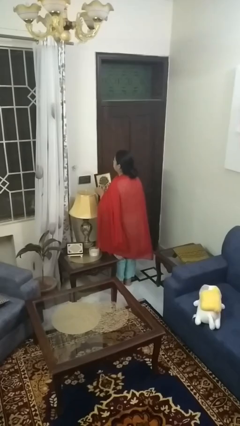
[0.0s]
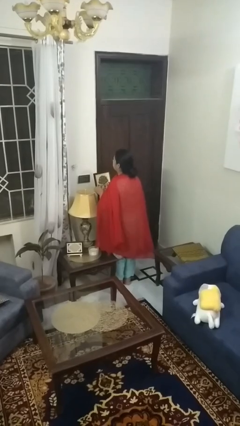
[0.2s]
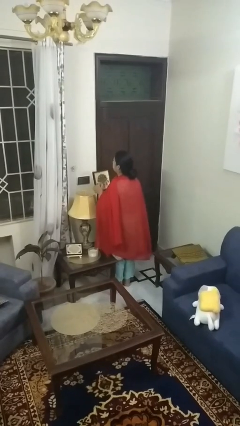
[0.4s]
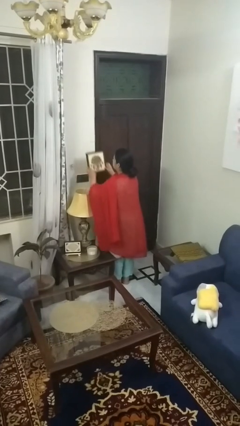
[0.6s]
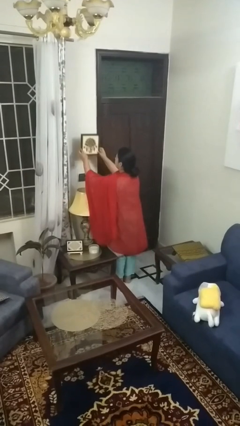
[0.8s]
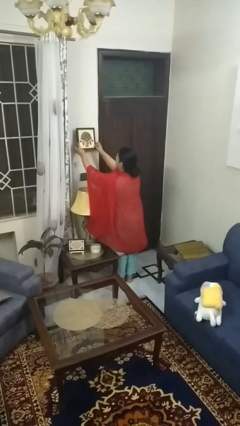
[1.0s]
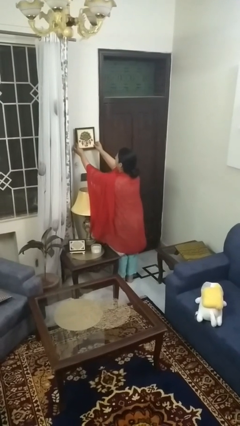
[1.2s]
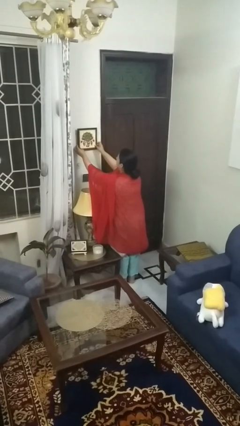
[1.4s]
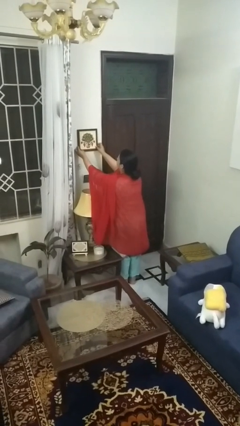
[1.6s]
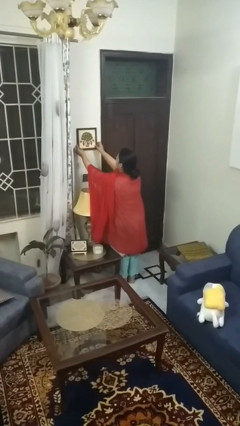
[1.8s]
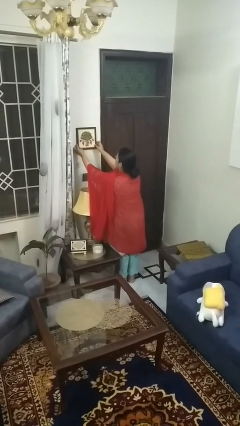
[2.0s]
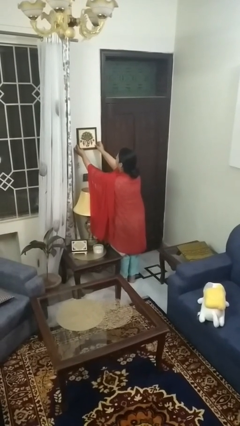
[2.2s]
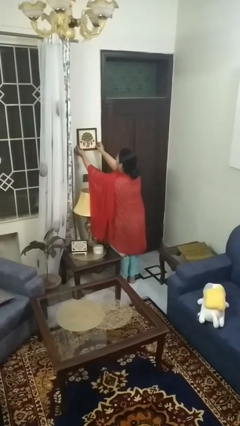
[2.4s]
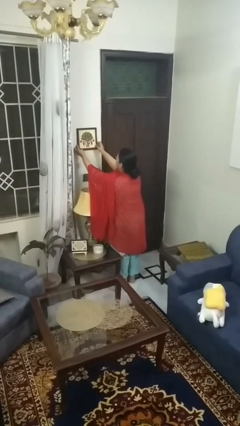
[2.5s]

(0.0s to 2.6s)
person puts up picture frame

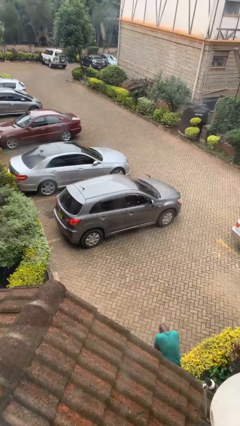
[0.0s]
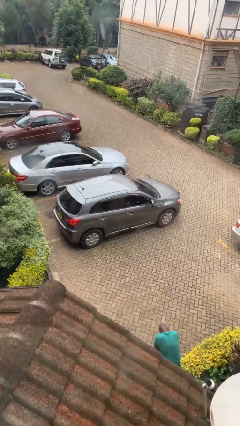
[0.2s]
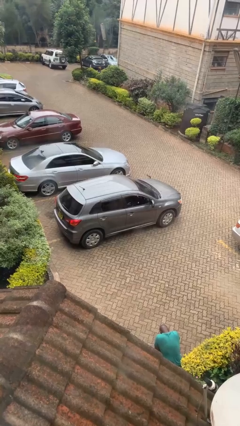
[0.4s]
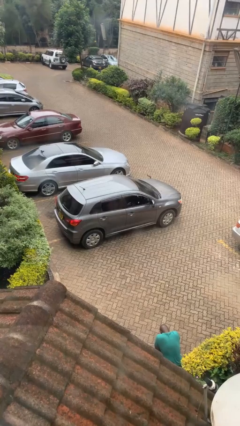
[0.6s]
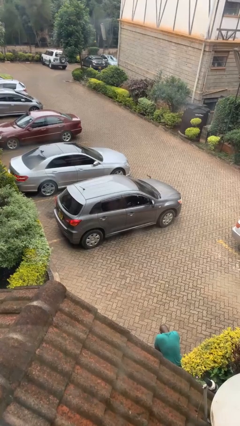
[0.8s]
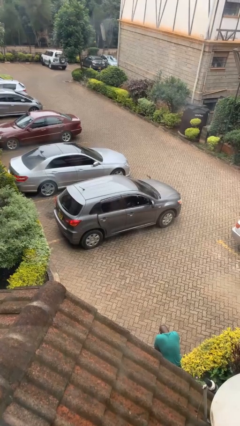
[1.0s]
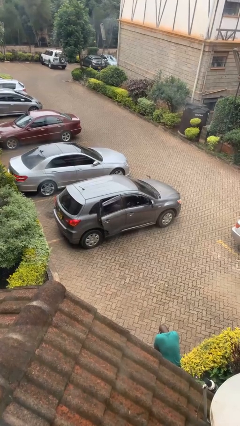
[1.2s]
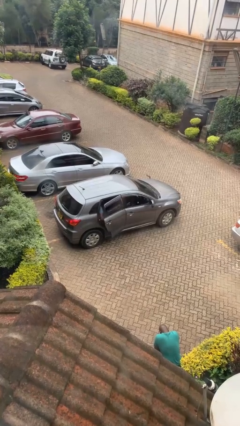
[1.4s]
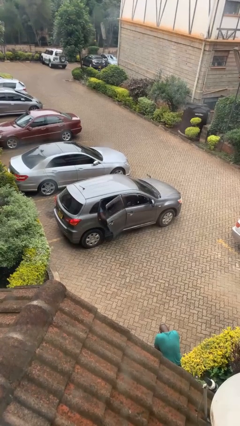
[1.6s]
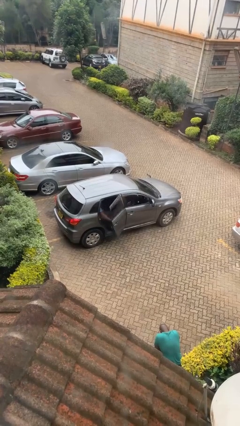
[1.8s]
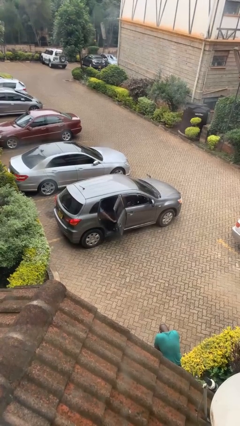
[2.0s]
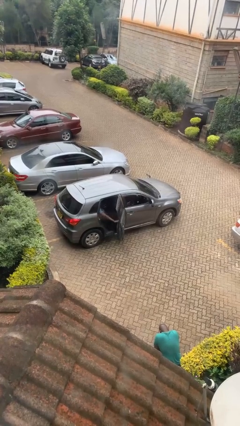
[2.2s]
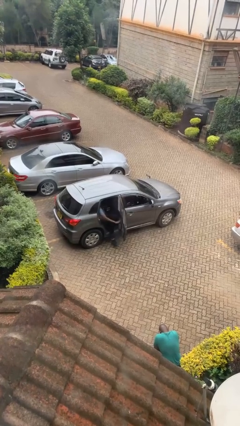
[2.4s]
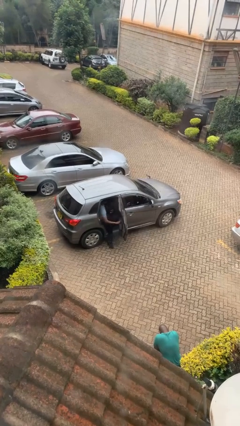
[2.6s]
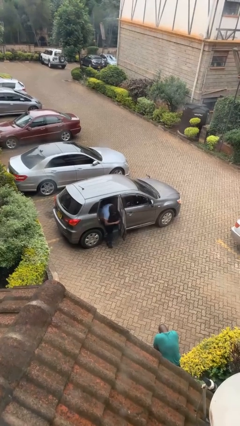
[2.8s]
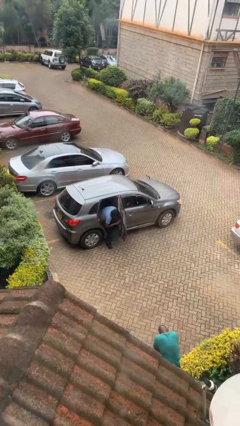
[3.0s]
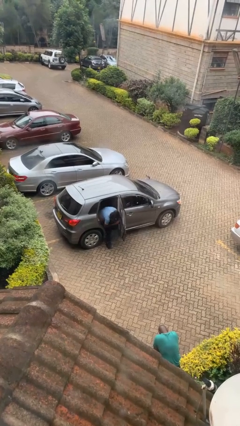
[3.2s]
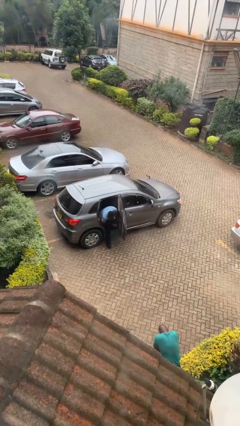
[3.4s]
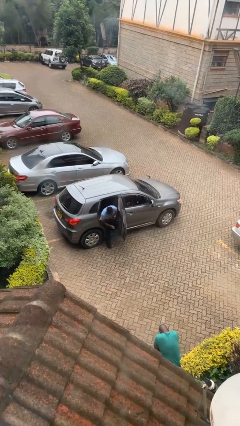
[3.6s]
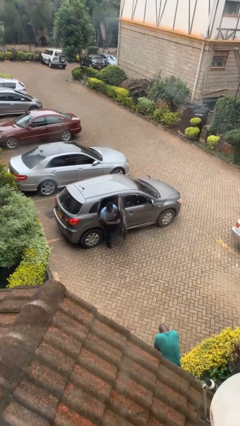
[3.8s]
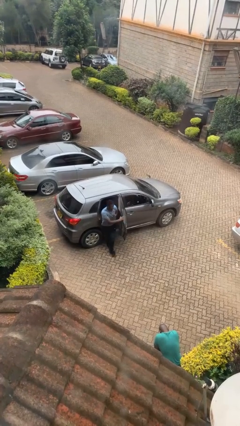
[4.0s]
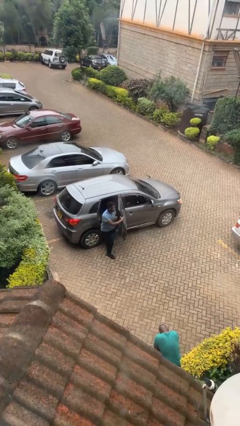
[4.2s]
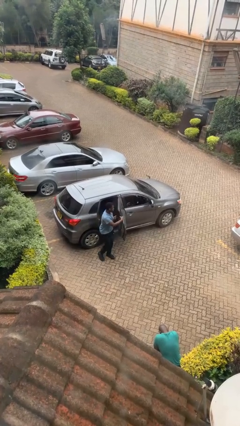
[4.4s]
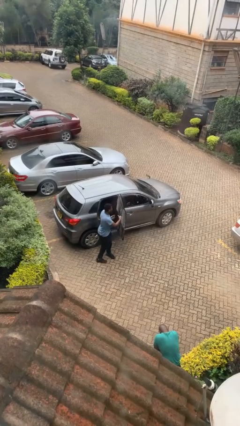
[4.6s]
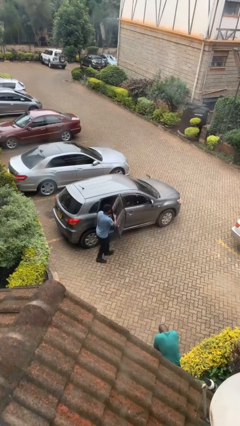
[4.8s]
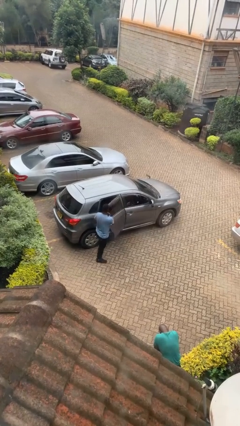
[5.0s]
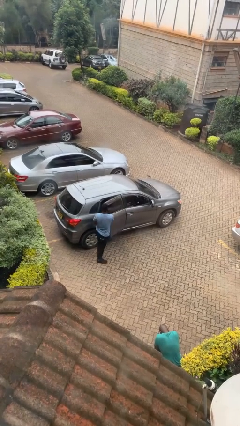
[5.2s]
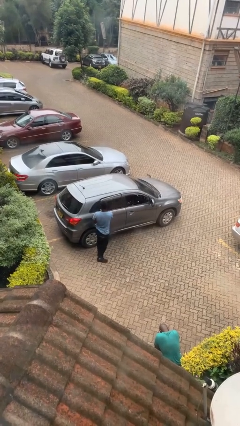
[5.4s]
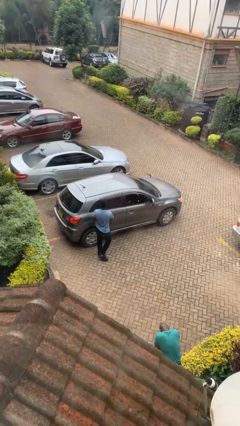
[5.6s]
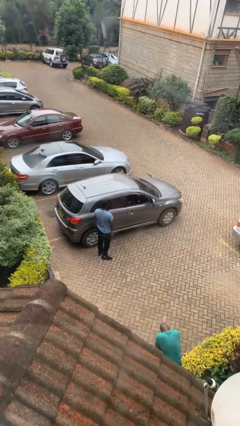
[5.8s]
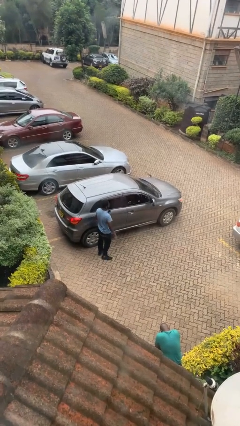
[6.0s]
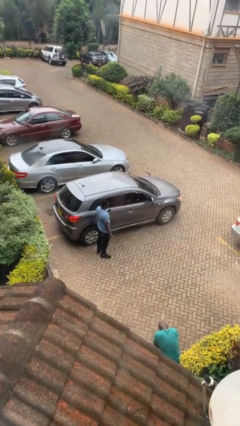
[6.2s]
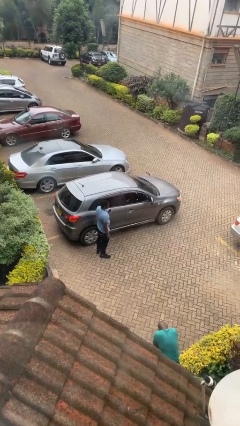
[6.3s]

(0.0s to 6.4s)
car drops off person

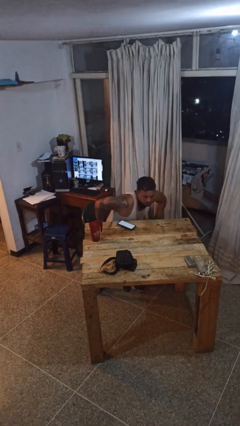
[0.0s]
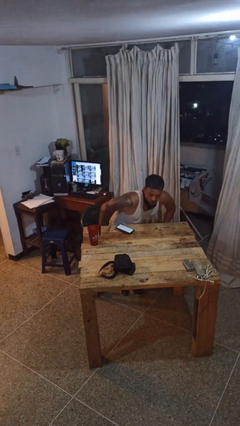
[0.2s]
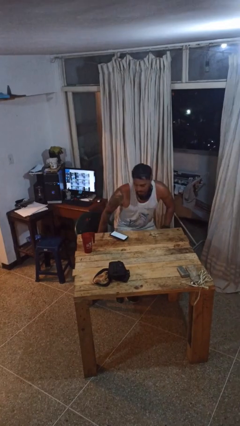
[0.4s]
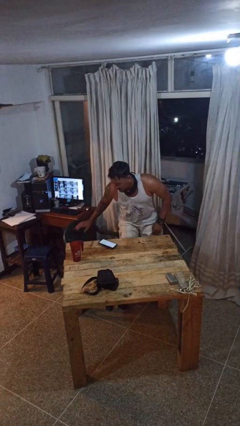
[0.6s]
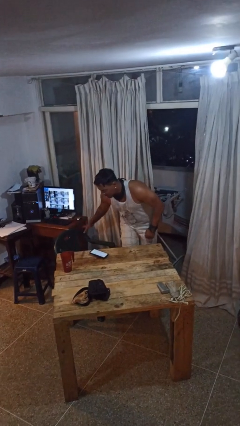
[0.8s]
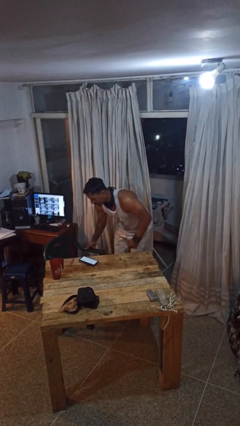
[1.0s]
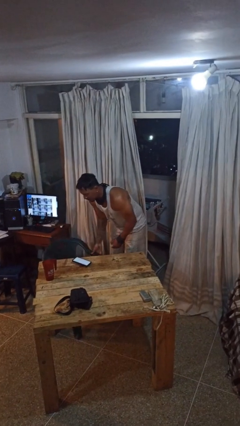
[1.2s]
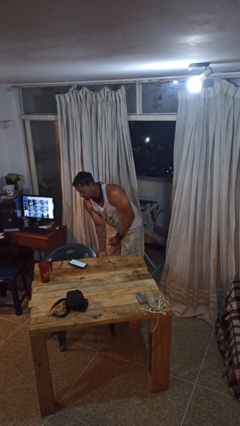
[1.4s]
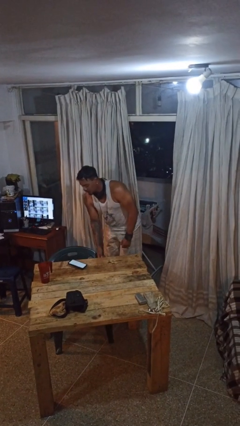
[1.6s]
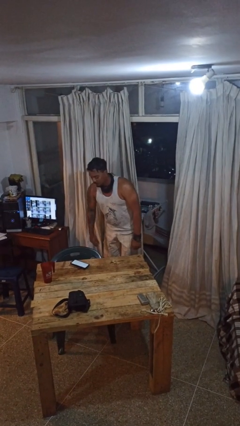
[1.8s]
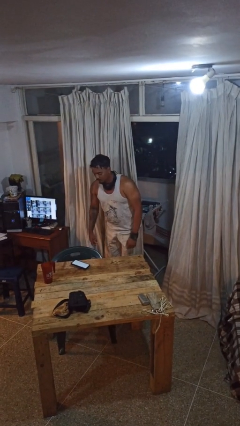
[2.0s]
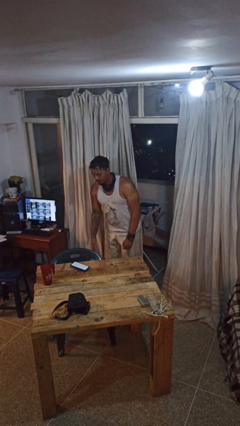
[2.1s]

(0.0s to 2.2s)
person stands up

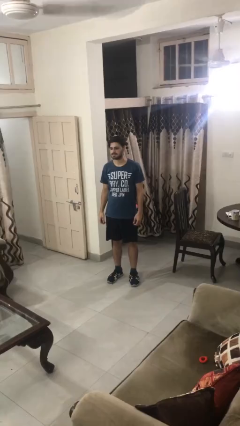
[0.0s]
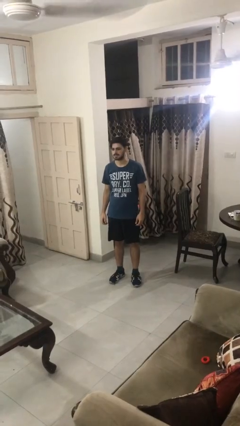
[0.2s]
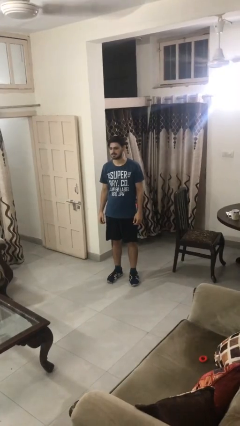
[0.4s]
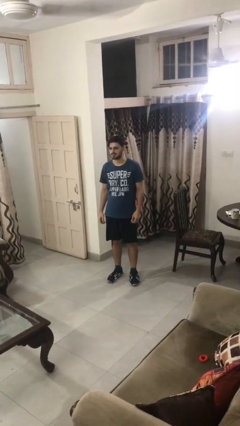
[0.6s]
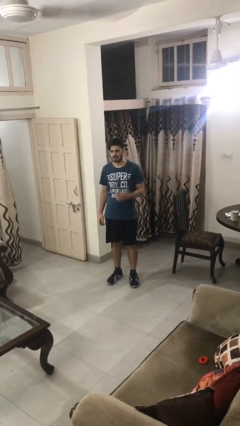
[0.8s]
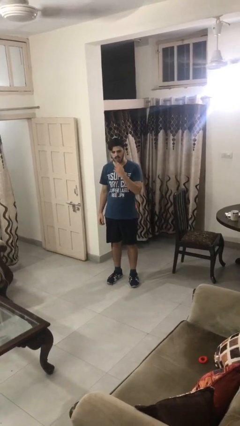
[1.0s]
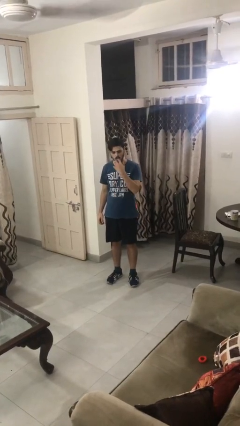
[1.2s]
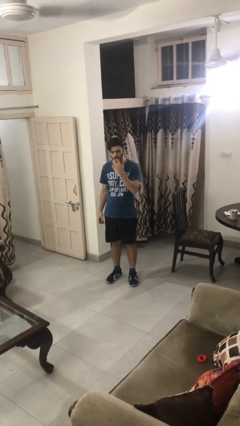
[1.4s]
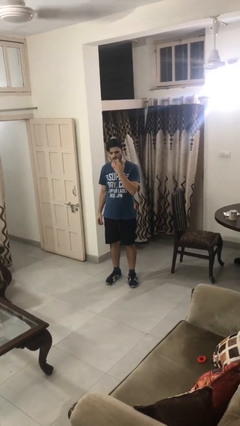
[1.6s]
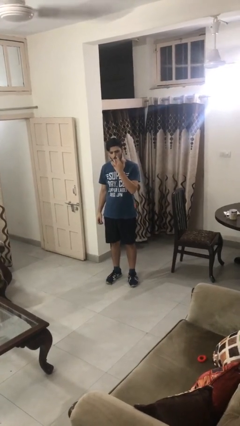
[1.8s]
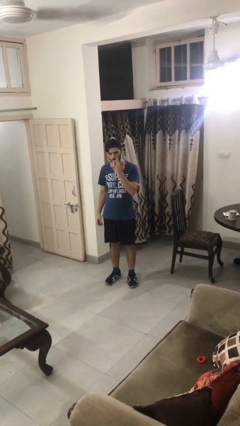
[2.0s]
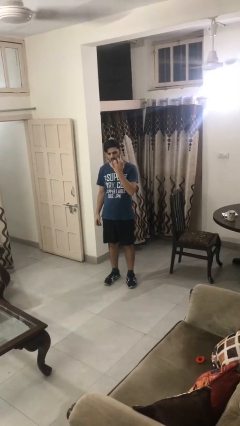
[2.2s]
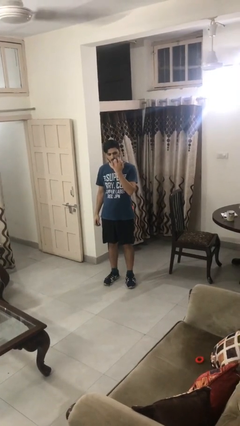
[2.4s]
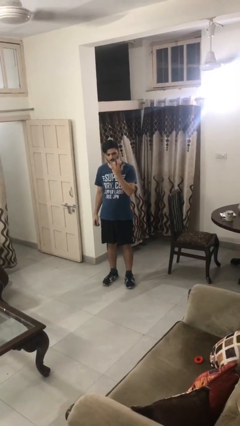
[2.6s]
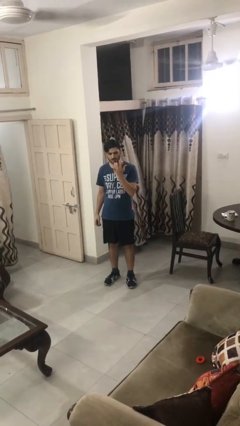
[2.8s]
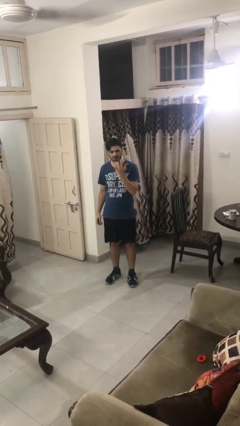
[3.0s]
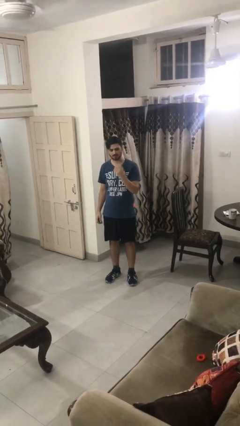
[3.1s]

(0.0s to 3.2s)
person licks fingers

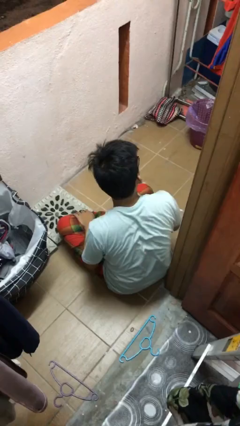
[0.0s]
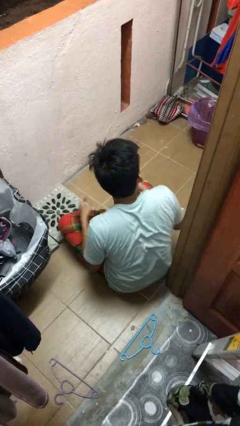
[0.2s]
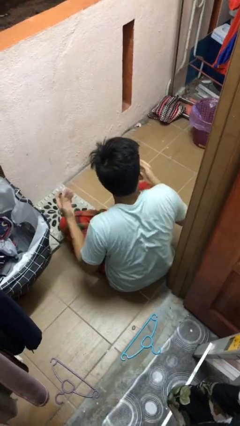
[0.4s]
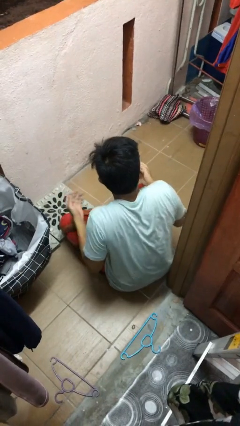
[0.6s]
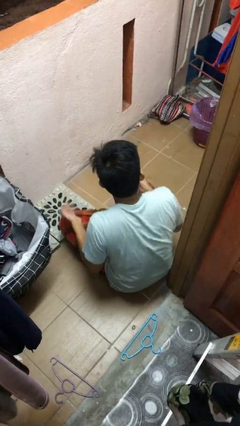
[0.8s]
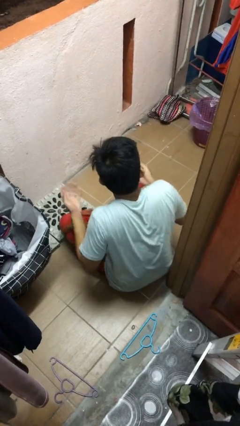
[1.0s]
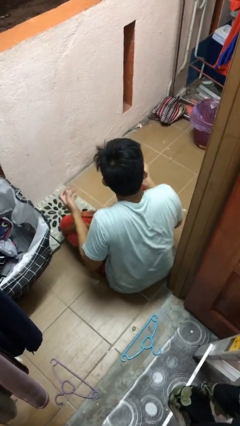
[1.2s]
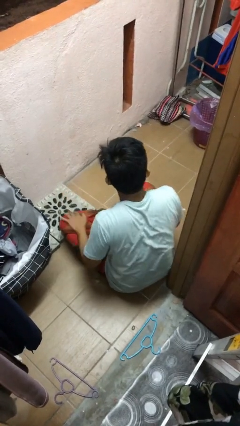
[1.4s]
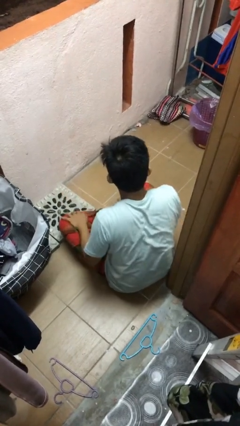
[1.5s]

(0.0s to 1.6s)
person shrugs

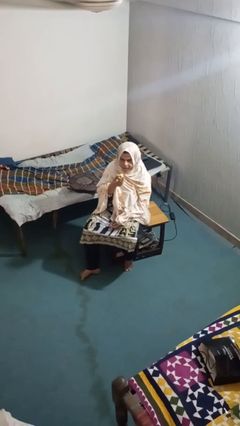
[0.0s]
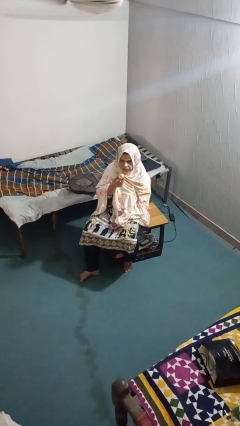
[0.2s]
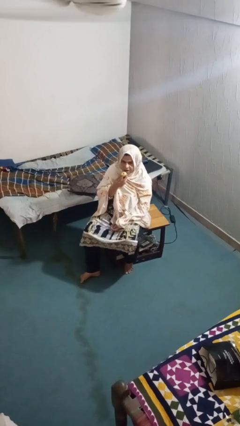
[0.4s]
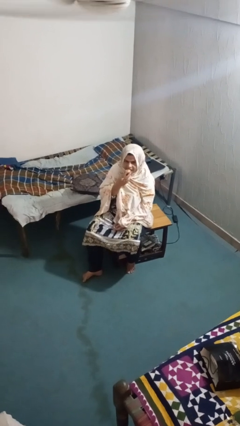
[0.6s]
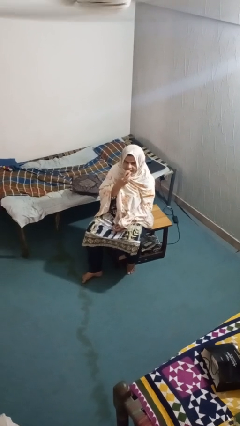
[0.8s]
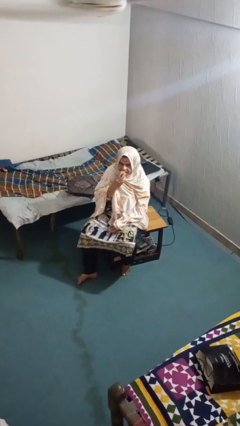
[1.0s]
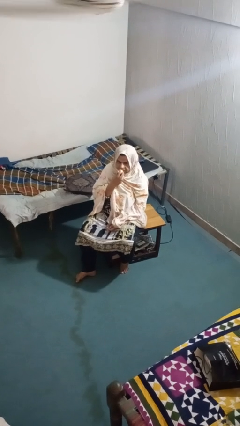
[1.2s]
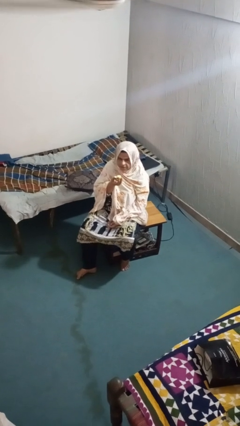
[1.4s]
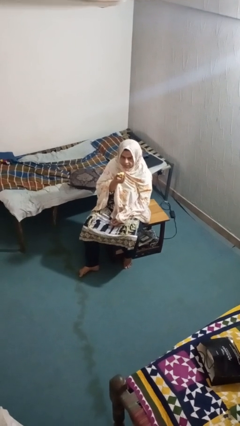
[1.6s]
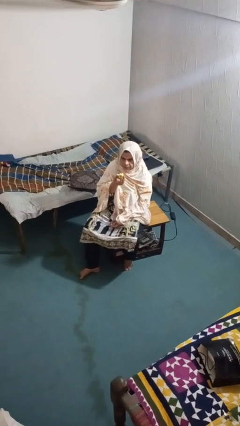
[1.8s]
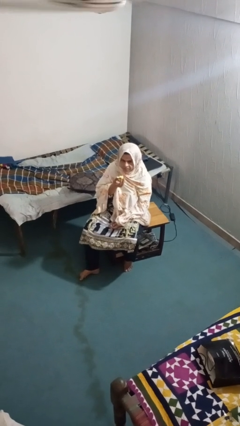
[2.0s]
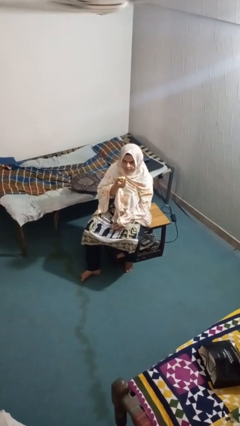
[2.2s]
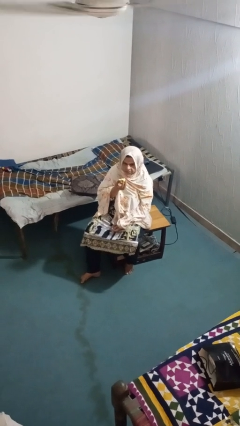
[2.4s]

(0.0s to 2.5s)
person eats apple
